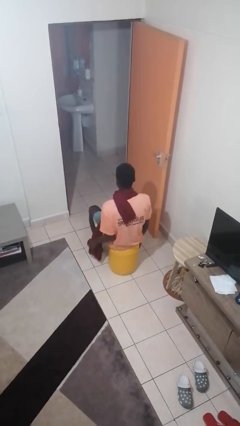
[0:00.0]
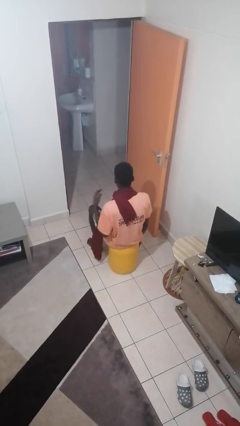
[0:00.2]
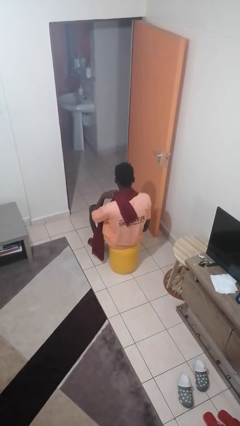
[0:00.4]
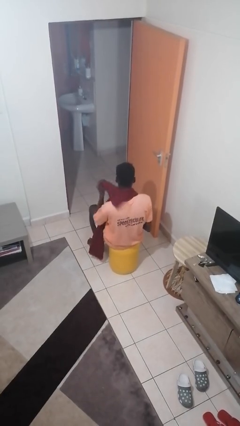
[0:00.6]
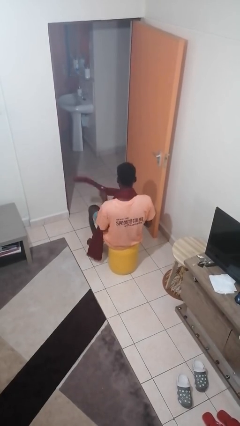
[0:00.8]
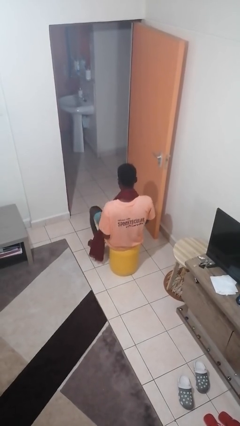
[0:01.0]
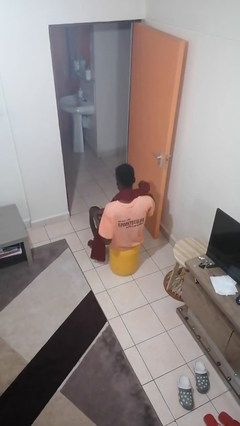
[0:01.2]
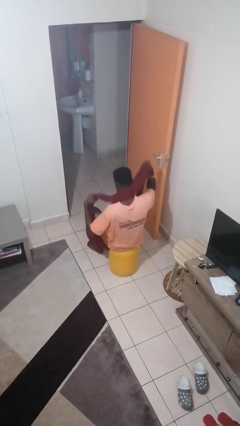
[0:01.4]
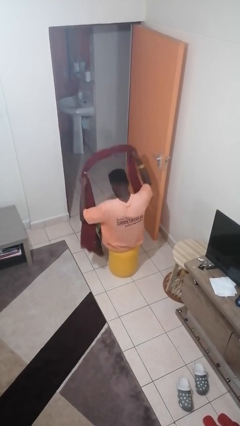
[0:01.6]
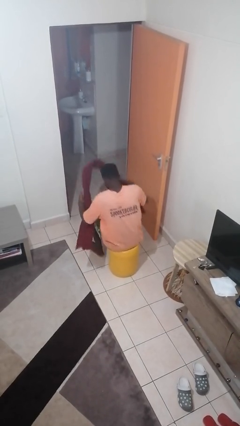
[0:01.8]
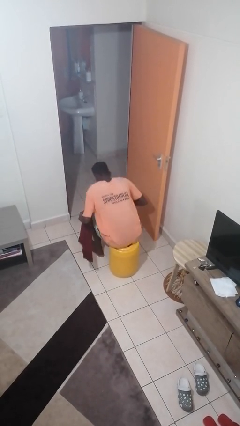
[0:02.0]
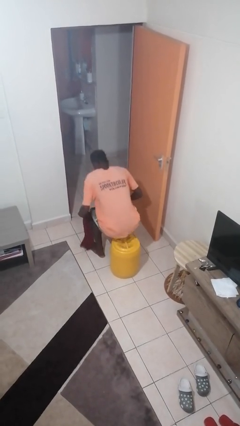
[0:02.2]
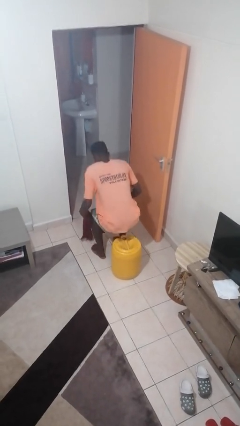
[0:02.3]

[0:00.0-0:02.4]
person takes off scarf

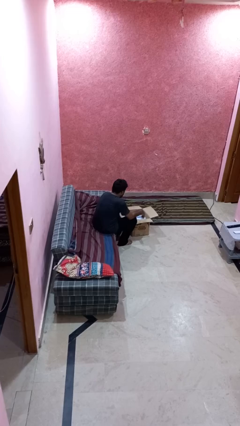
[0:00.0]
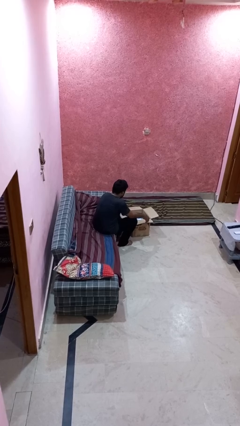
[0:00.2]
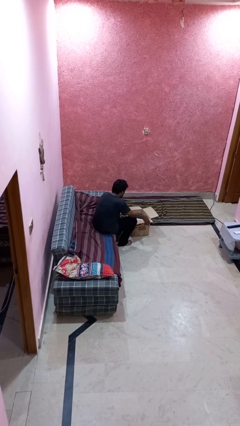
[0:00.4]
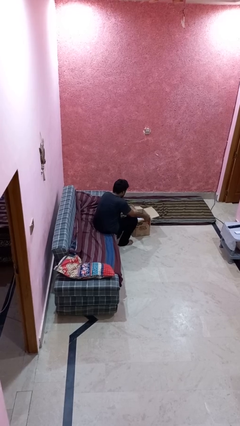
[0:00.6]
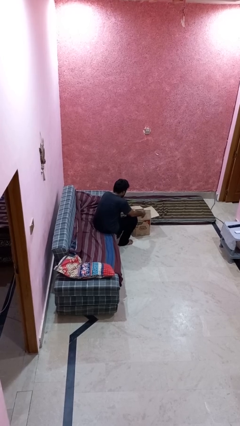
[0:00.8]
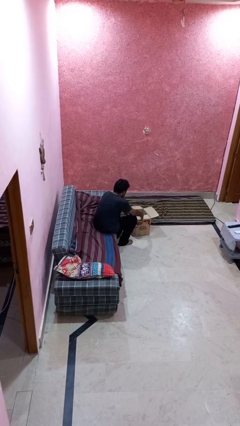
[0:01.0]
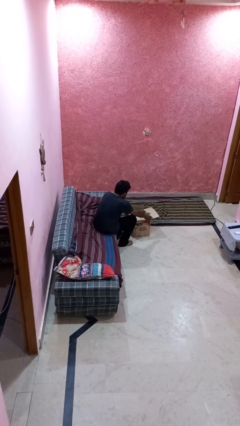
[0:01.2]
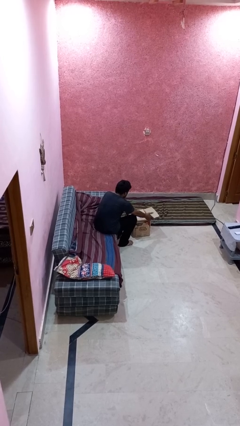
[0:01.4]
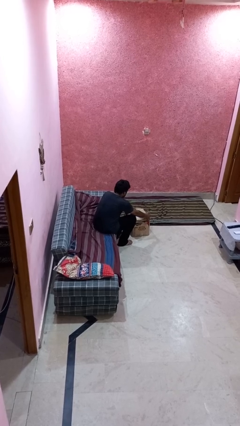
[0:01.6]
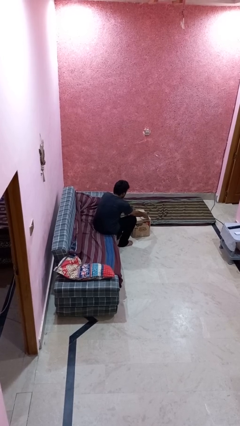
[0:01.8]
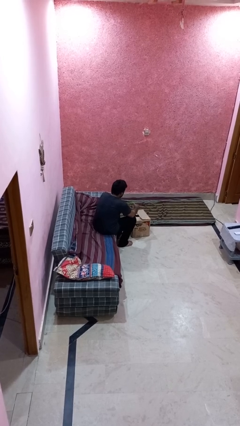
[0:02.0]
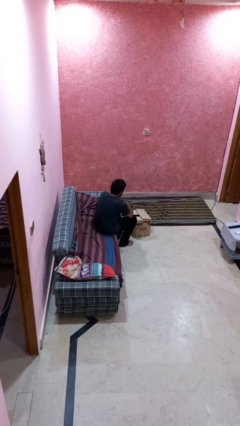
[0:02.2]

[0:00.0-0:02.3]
person closes box

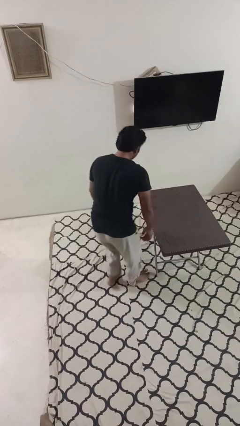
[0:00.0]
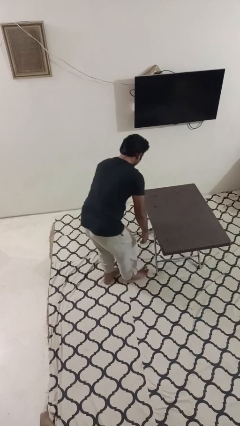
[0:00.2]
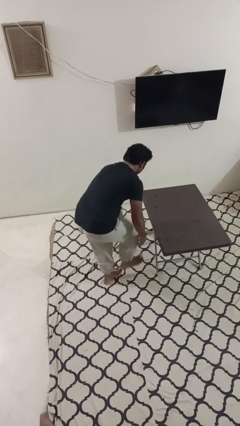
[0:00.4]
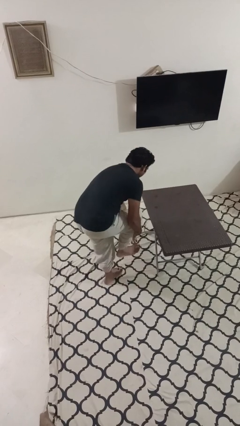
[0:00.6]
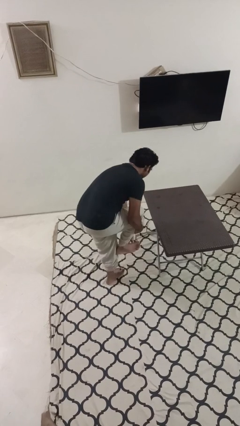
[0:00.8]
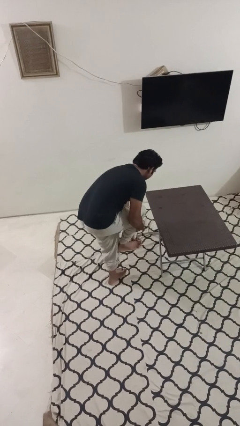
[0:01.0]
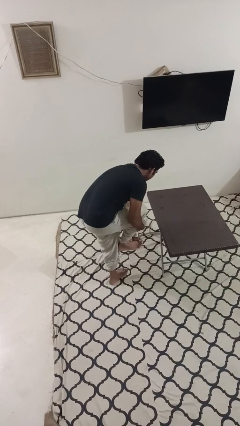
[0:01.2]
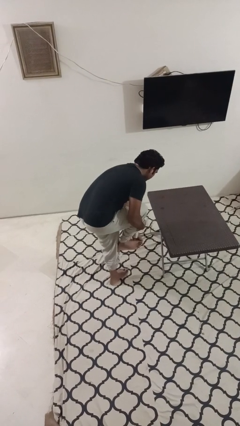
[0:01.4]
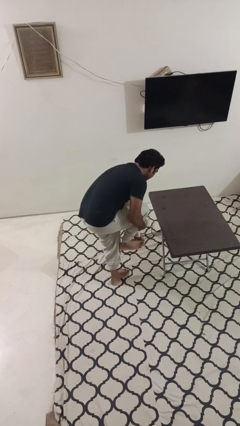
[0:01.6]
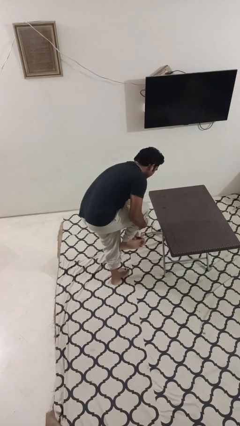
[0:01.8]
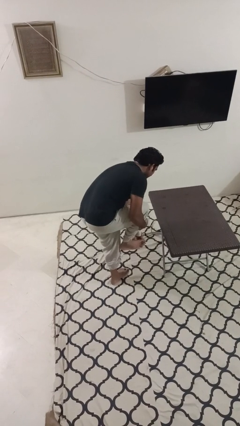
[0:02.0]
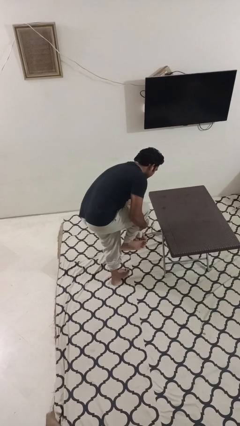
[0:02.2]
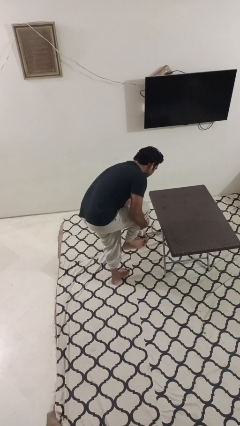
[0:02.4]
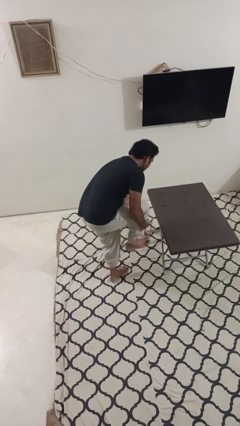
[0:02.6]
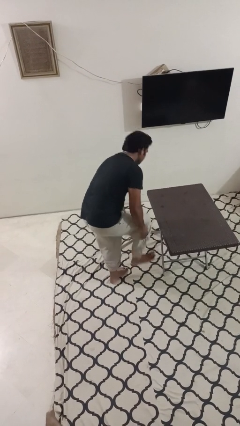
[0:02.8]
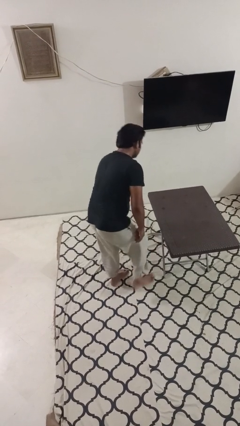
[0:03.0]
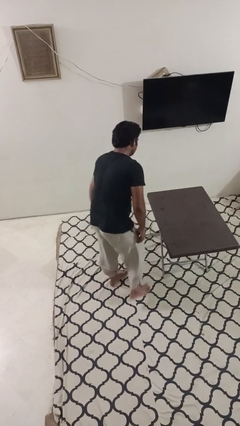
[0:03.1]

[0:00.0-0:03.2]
person stubs toe

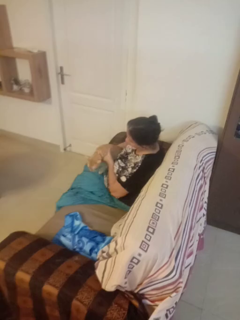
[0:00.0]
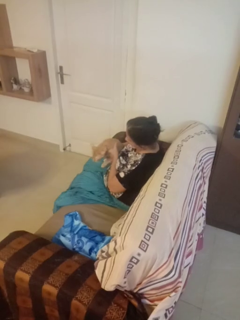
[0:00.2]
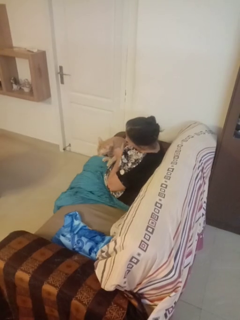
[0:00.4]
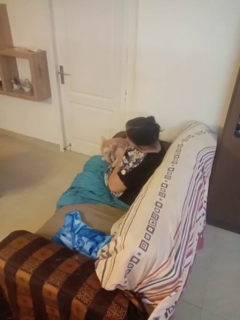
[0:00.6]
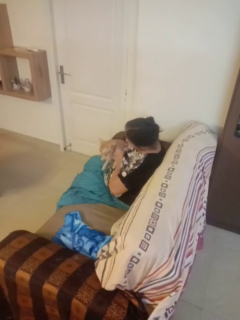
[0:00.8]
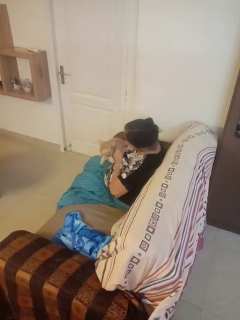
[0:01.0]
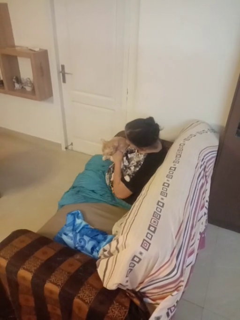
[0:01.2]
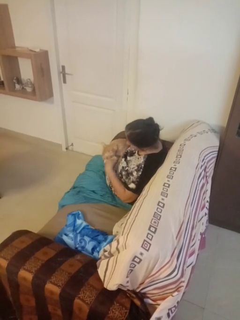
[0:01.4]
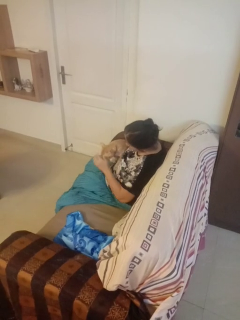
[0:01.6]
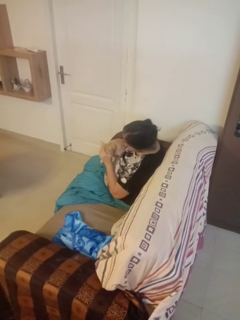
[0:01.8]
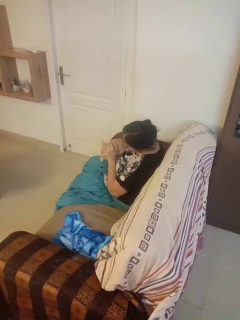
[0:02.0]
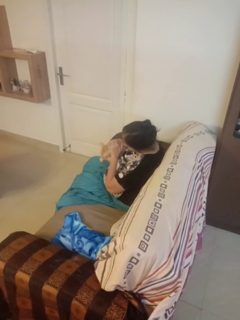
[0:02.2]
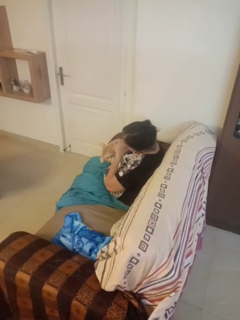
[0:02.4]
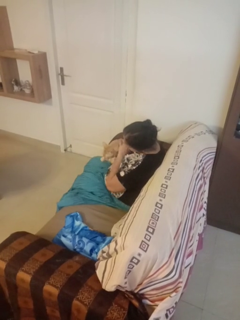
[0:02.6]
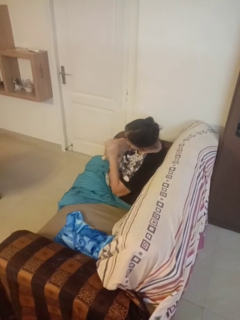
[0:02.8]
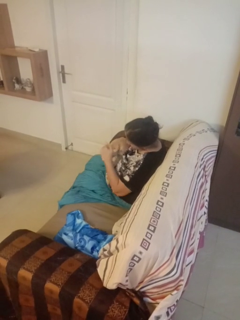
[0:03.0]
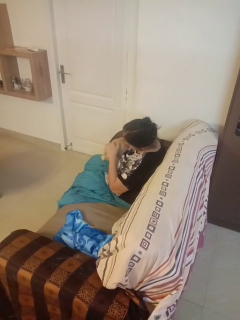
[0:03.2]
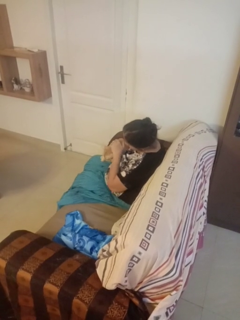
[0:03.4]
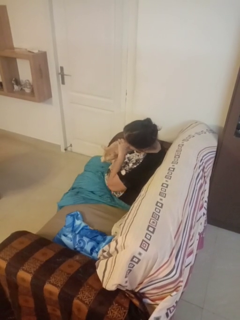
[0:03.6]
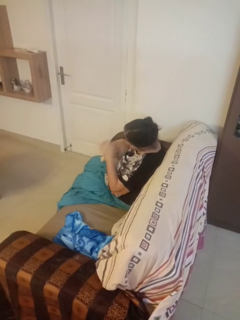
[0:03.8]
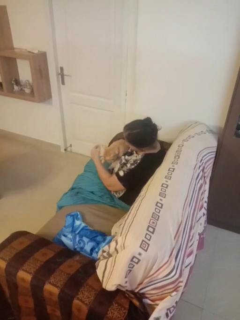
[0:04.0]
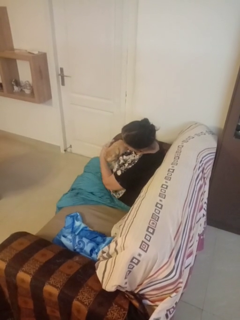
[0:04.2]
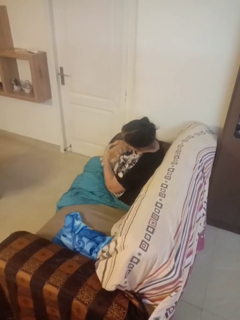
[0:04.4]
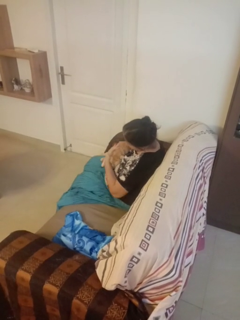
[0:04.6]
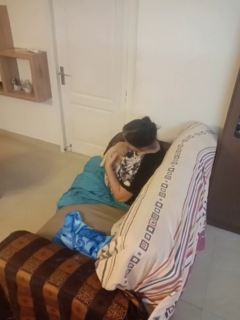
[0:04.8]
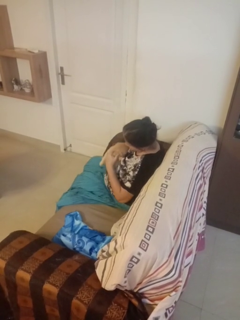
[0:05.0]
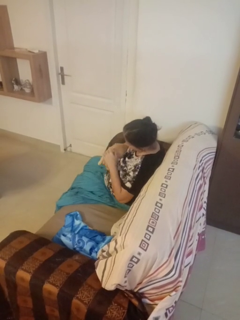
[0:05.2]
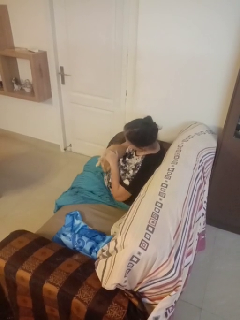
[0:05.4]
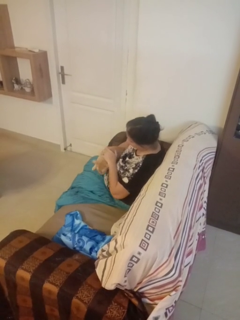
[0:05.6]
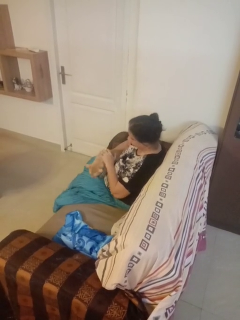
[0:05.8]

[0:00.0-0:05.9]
person hugs cat

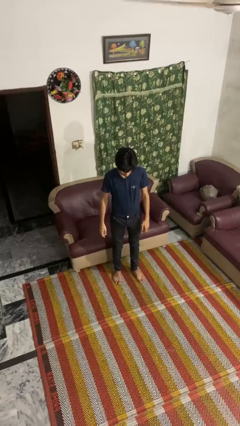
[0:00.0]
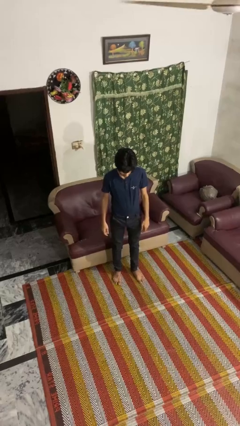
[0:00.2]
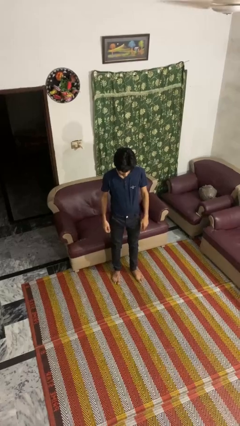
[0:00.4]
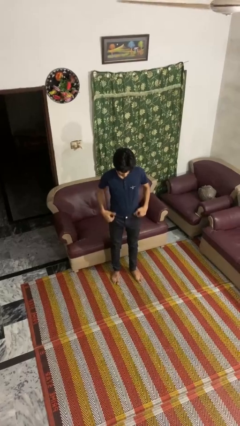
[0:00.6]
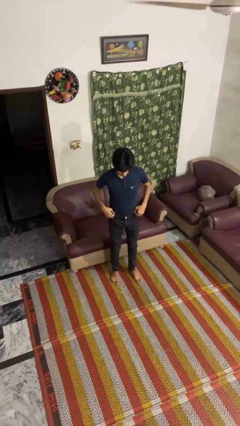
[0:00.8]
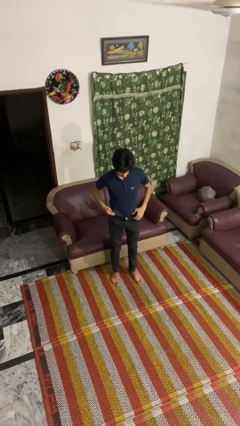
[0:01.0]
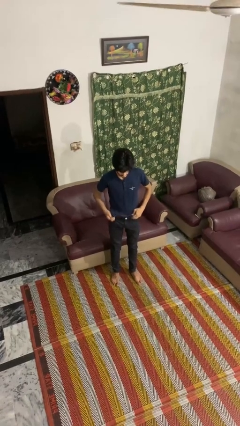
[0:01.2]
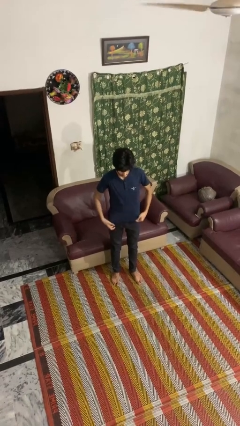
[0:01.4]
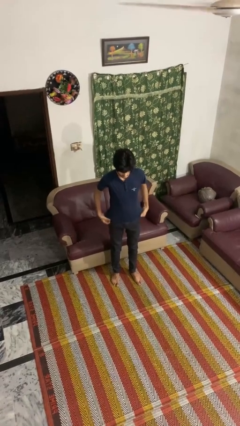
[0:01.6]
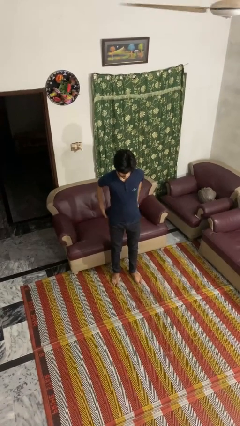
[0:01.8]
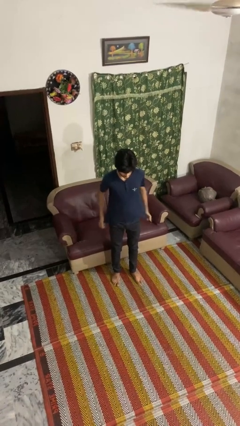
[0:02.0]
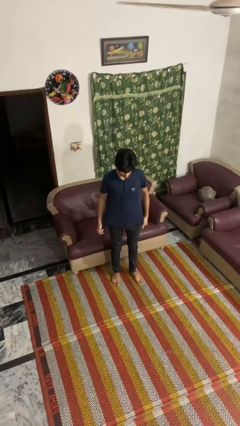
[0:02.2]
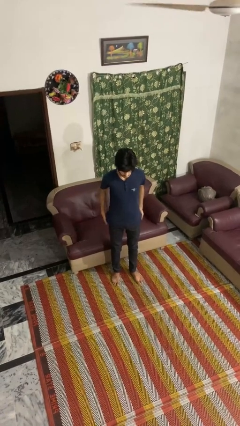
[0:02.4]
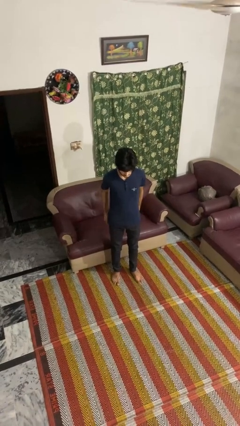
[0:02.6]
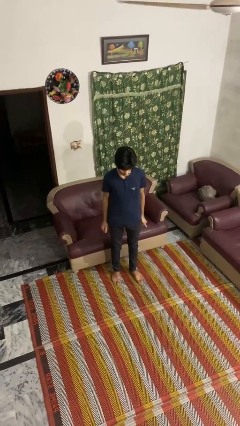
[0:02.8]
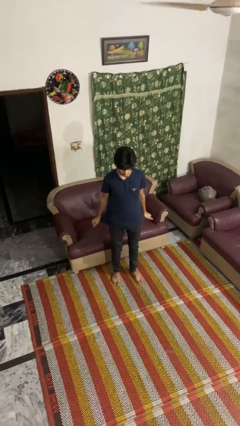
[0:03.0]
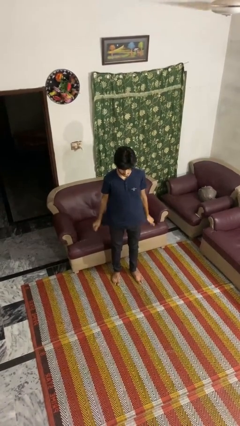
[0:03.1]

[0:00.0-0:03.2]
person untucks shirt

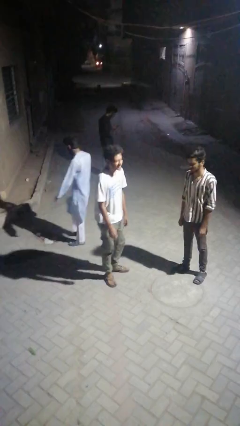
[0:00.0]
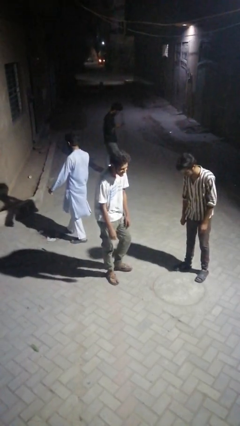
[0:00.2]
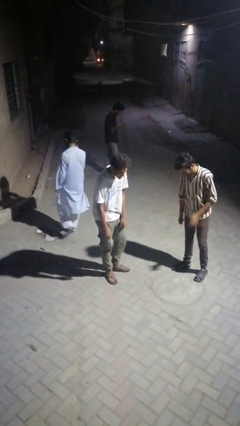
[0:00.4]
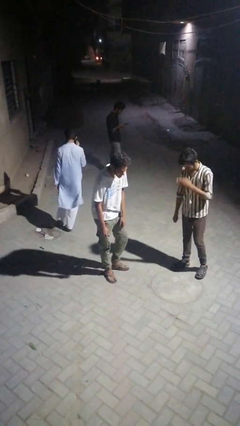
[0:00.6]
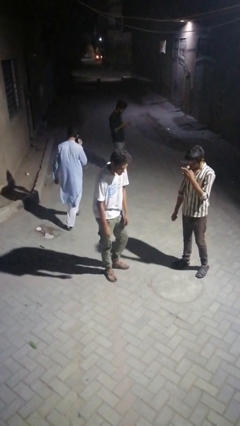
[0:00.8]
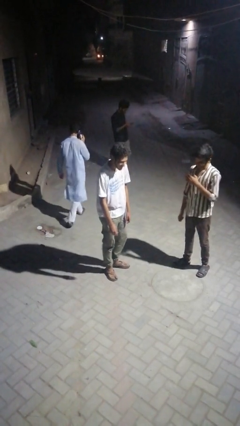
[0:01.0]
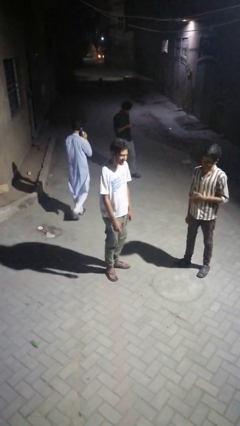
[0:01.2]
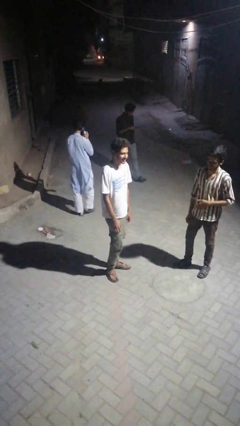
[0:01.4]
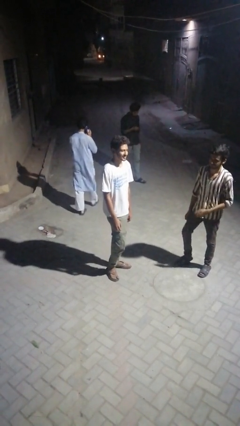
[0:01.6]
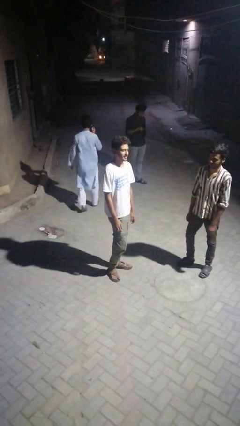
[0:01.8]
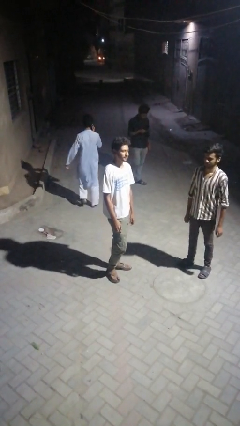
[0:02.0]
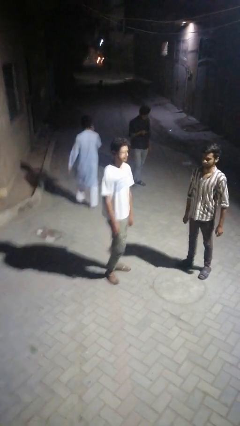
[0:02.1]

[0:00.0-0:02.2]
person laughs with person
